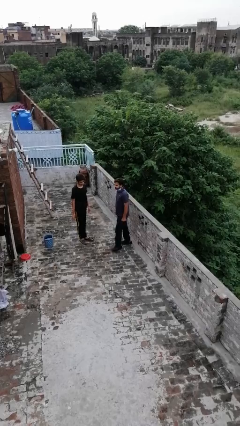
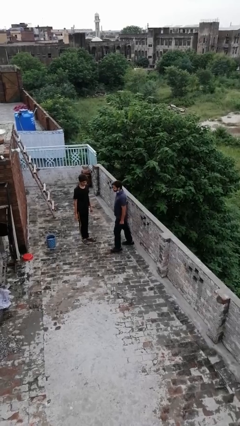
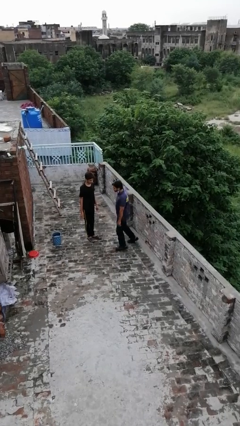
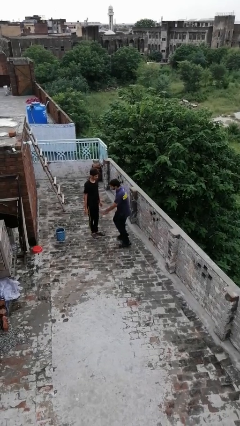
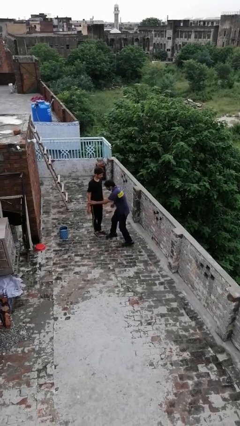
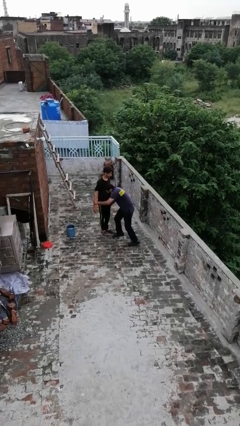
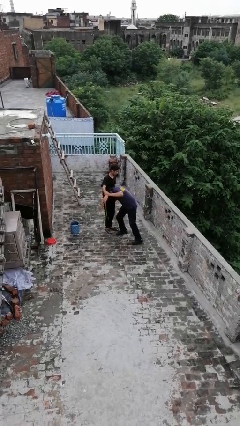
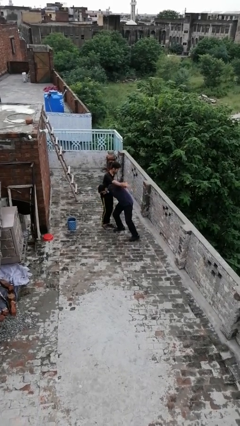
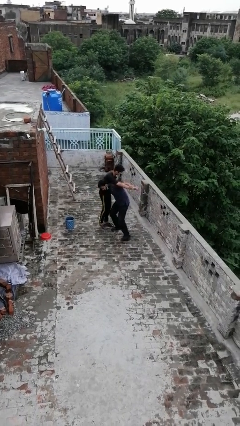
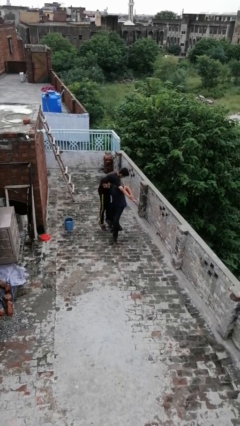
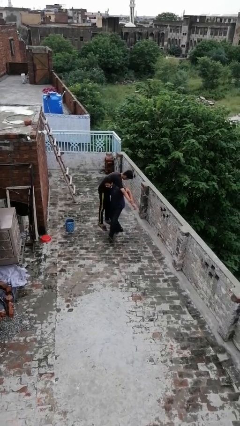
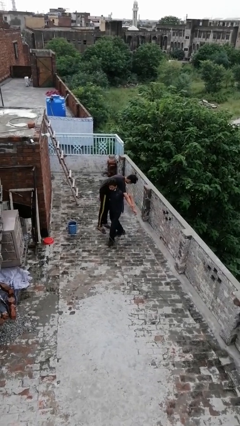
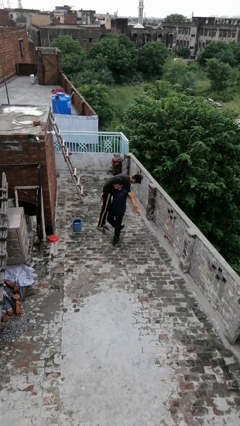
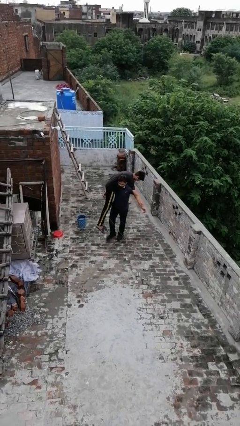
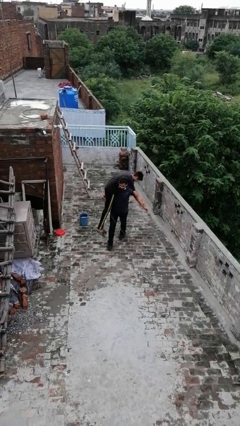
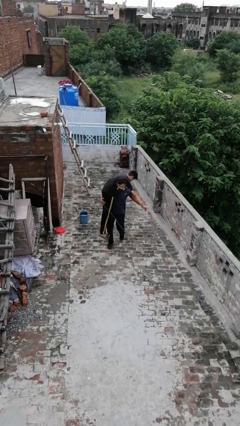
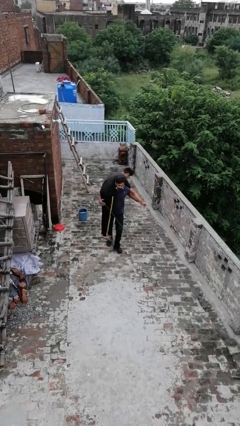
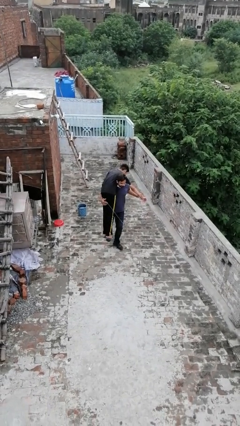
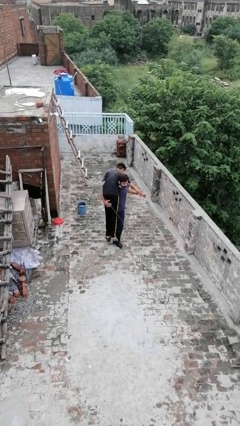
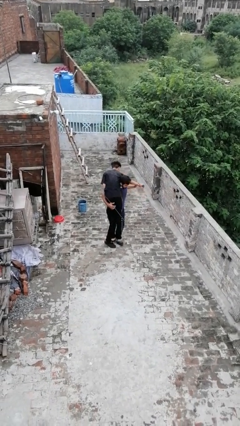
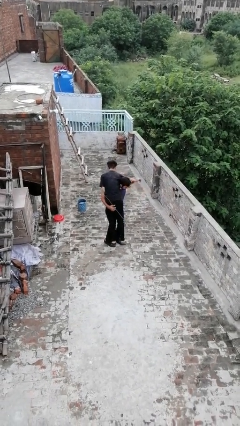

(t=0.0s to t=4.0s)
person carries person on shoulders

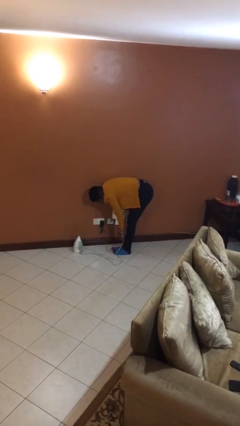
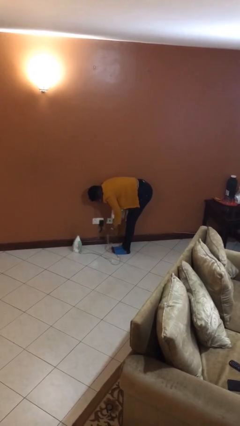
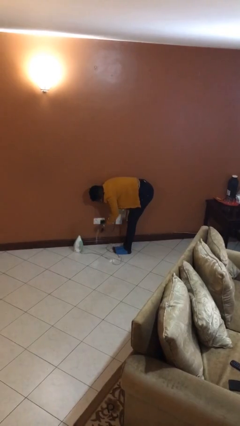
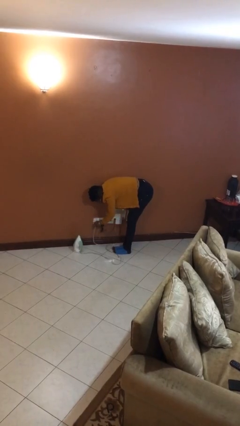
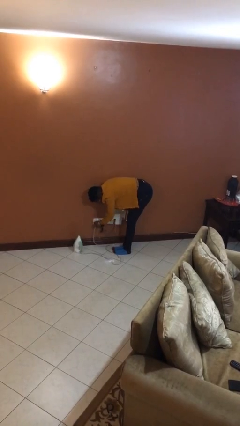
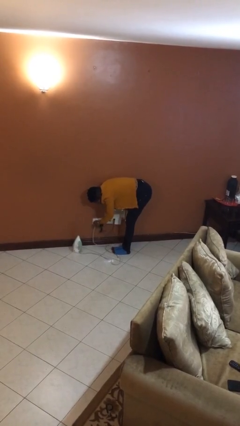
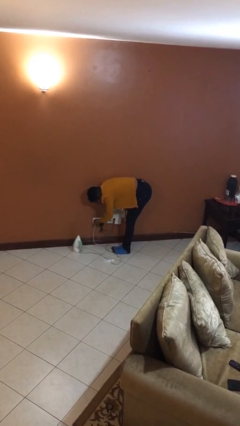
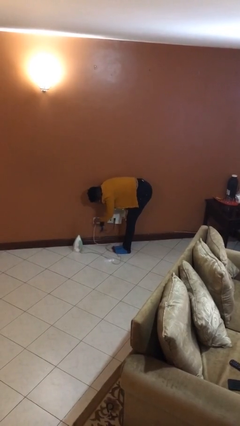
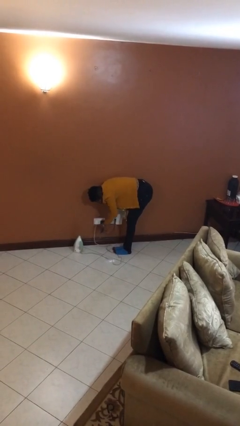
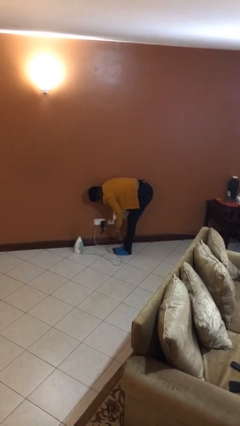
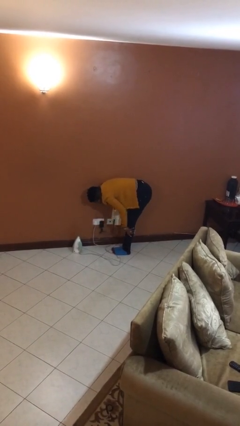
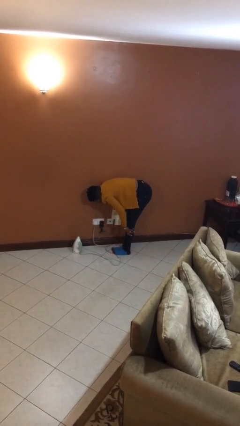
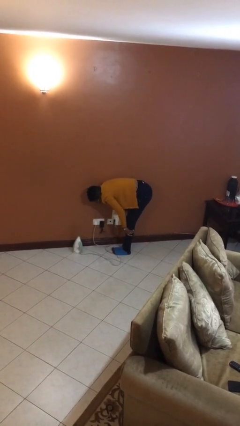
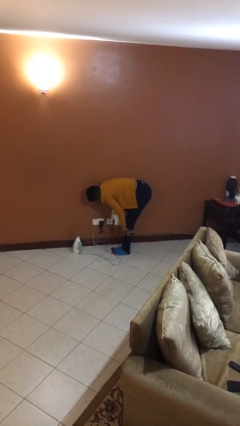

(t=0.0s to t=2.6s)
person plugs into electrical socket

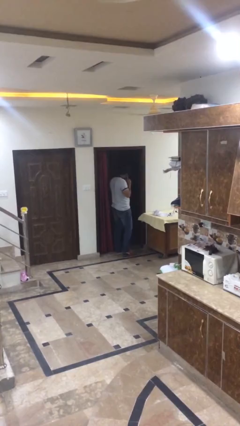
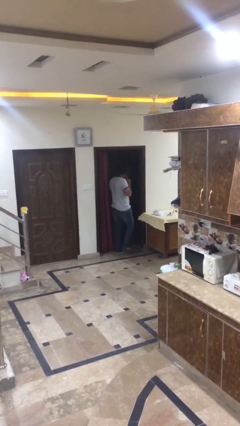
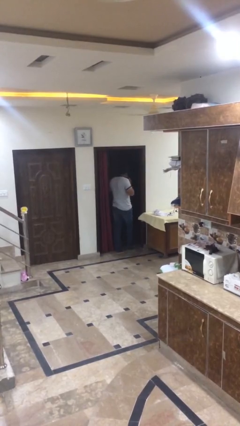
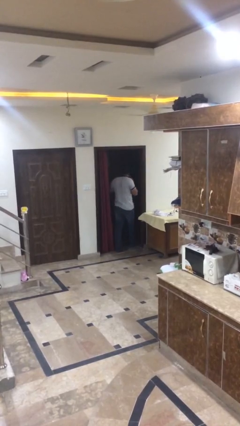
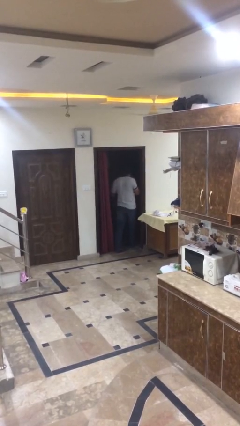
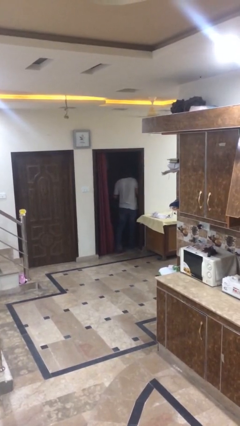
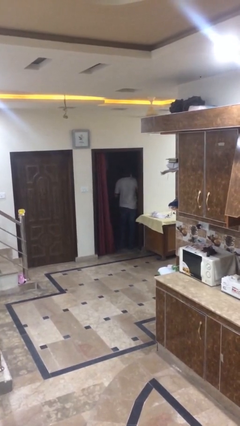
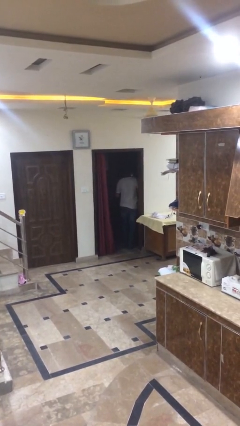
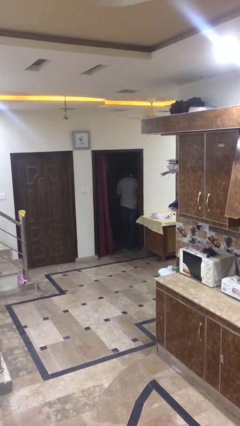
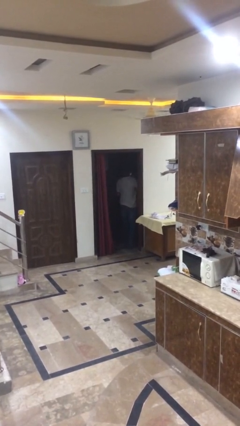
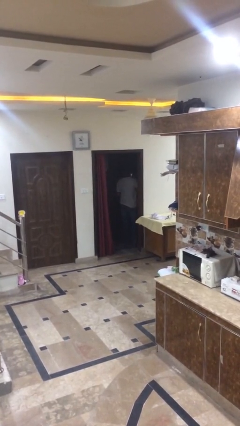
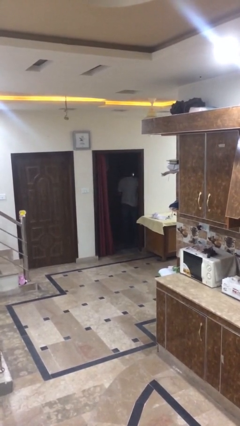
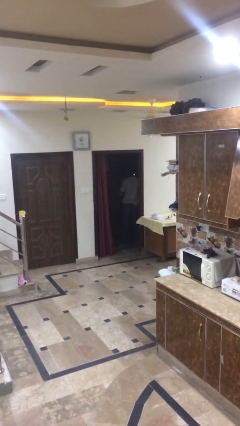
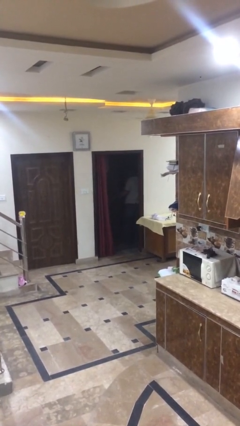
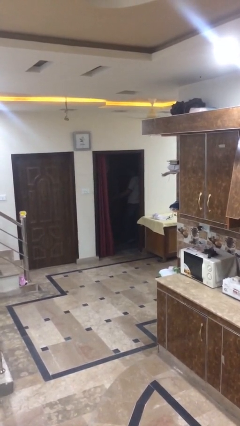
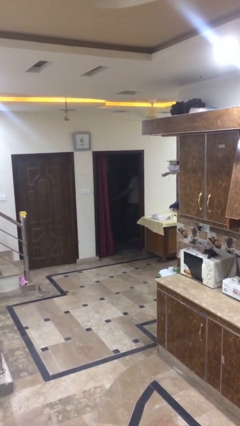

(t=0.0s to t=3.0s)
person exits scene through structure

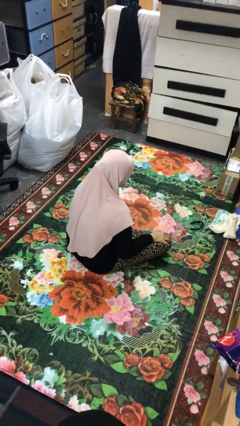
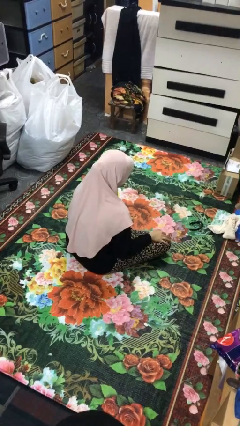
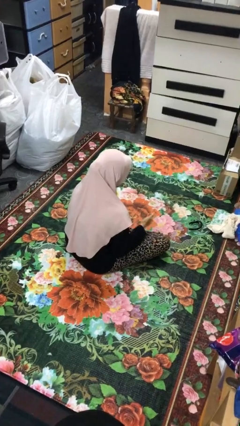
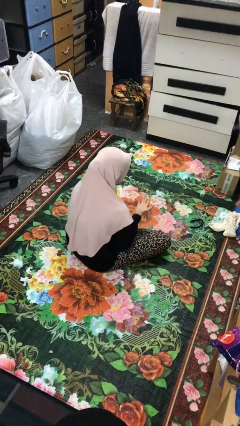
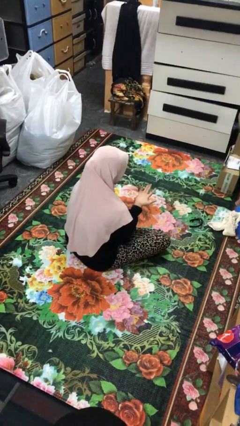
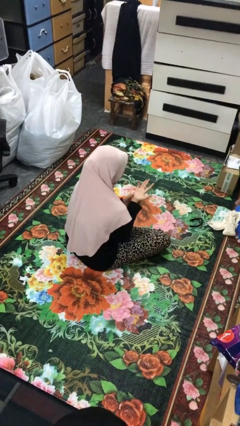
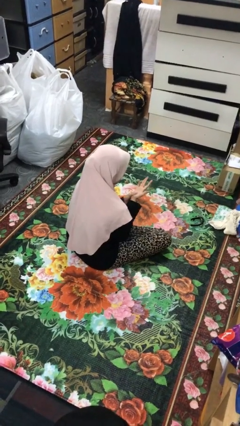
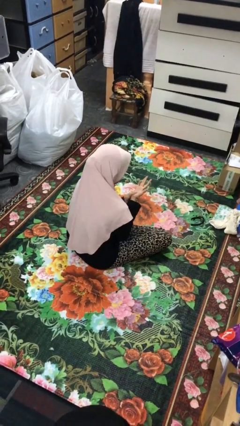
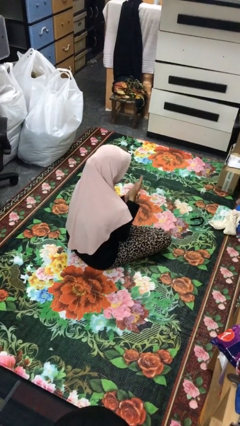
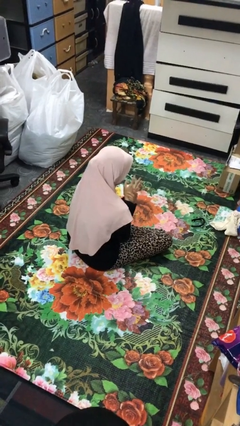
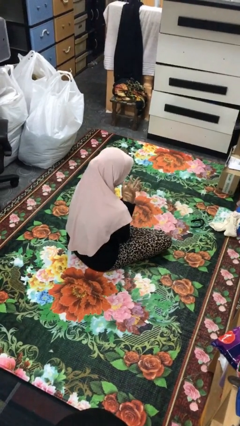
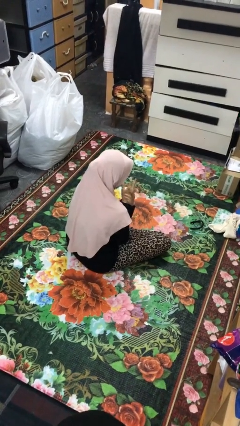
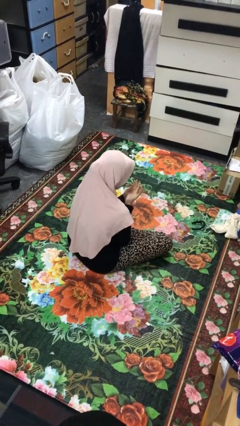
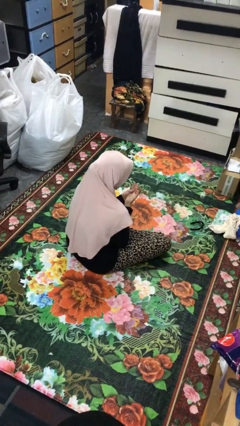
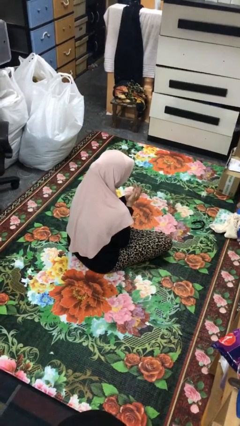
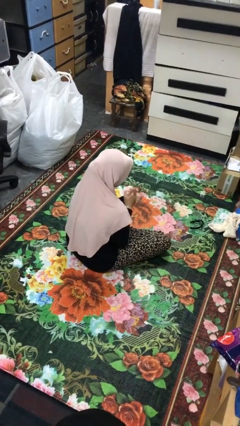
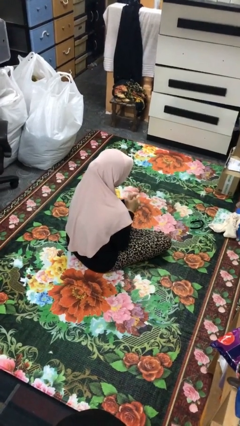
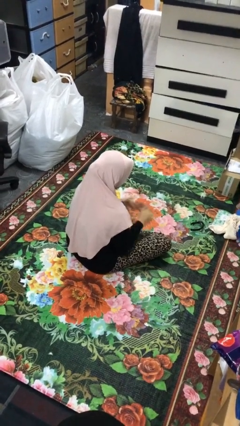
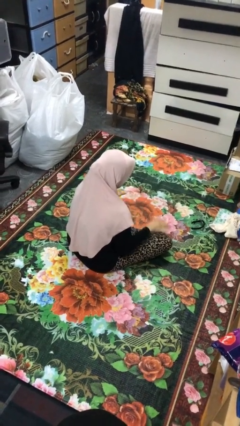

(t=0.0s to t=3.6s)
person looks at hands in lap

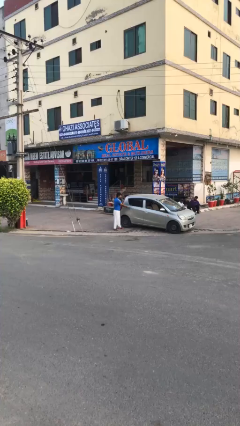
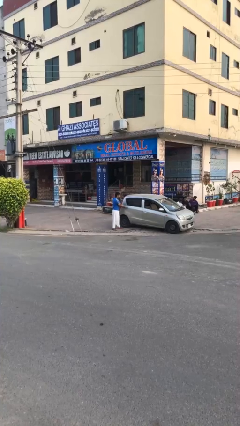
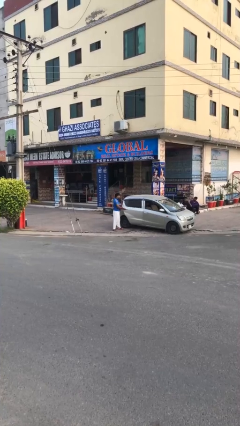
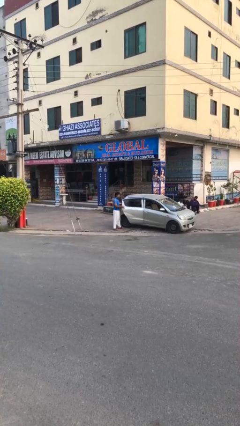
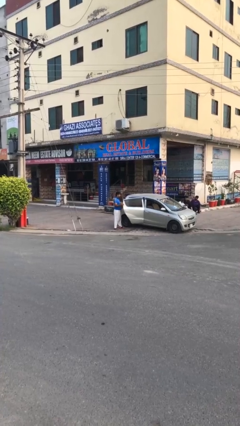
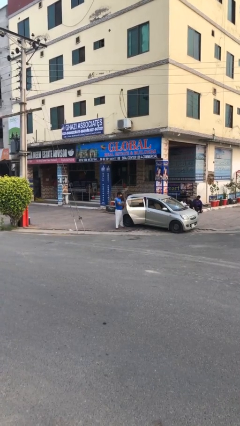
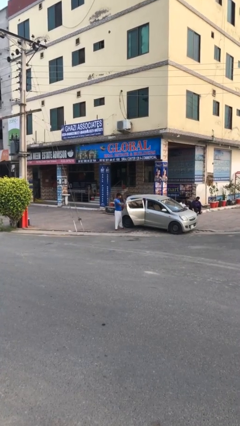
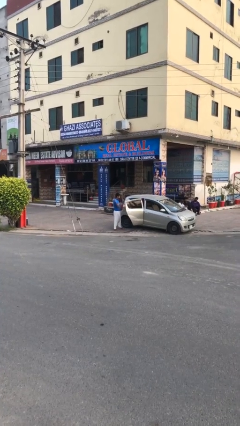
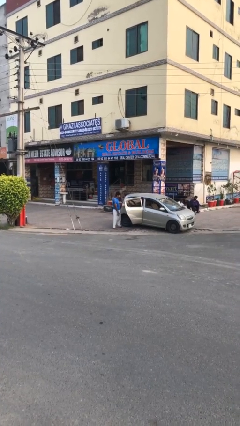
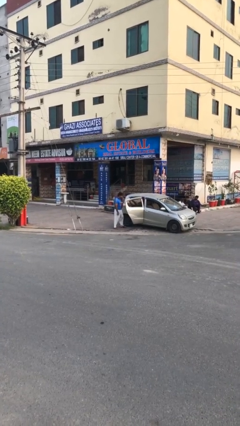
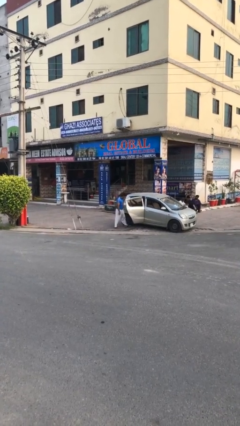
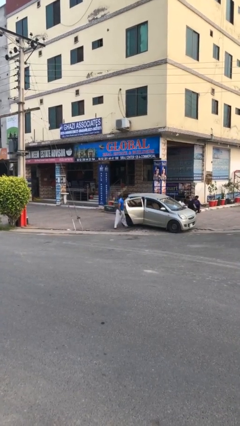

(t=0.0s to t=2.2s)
person opens car door

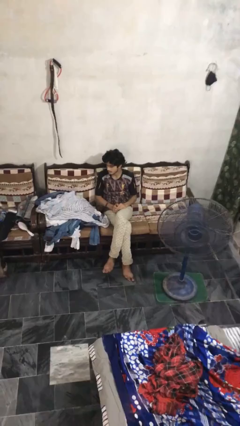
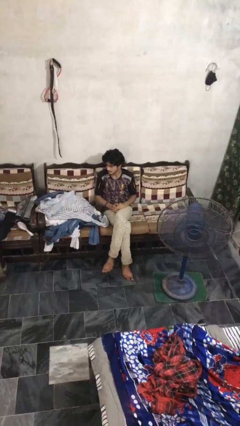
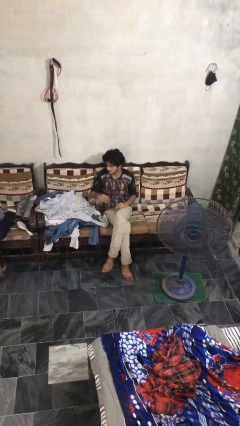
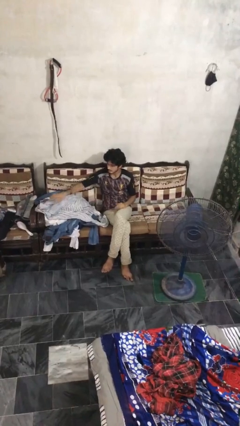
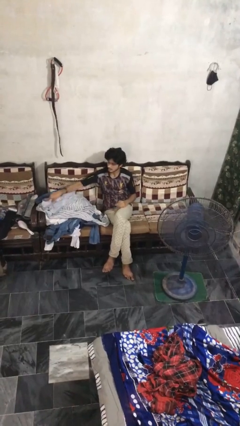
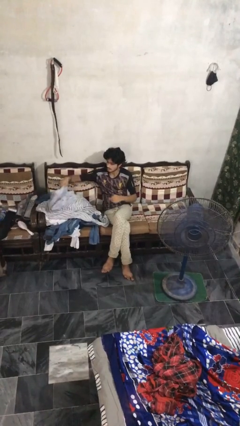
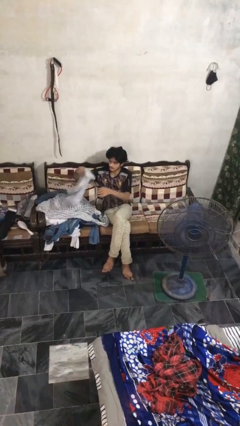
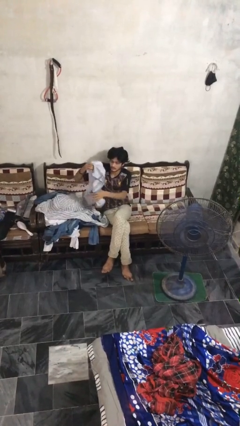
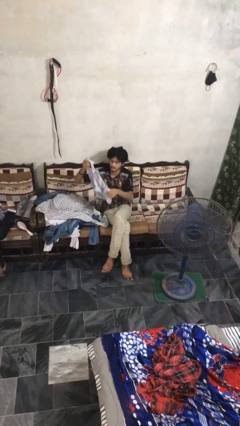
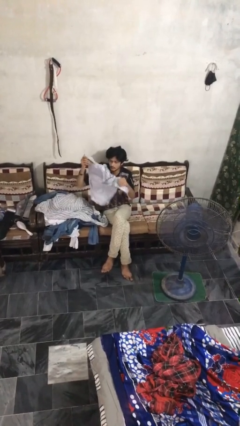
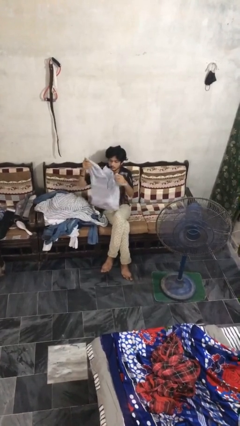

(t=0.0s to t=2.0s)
person folds shirt

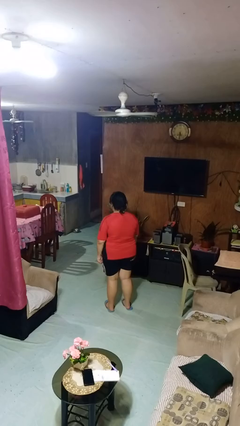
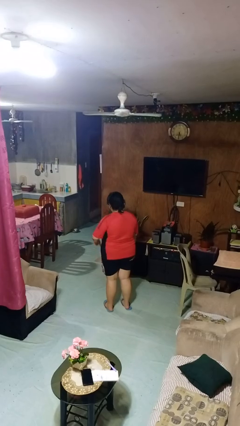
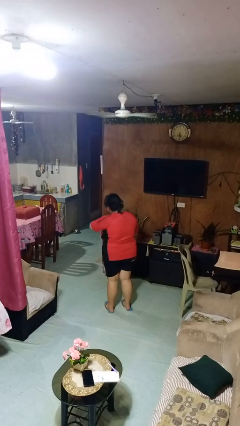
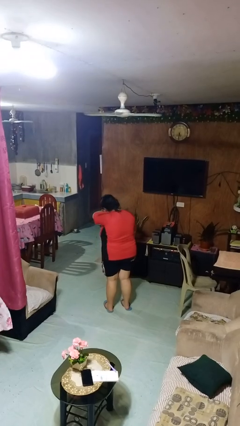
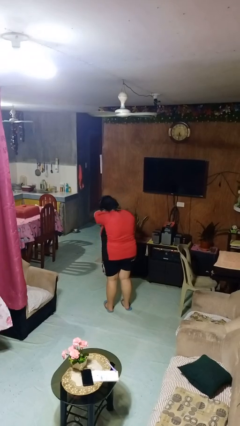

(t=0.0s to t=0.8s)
person sneezes into arm
